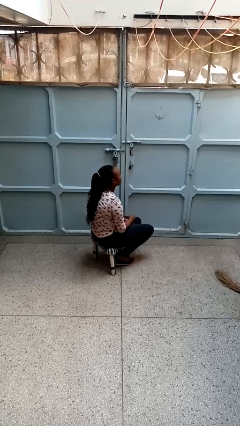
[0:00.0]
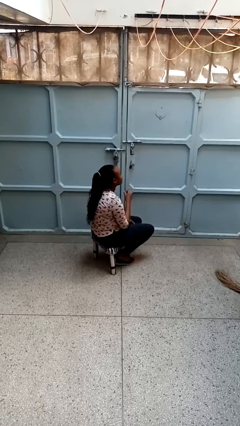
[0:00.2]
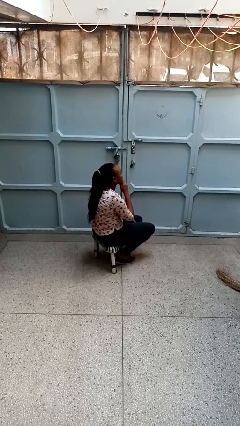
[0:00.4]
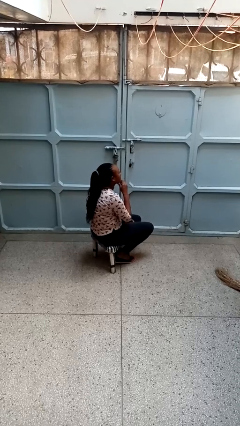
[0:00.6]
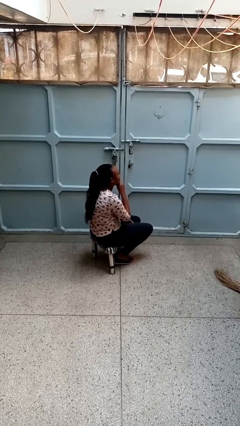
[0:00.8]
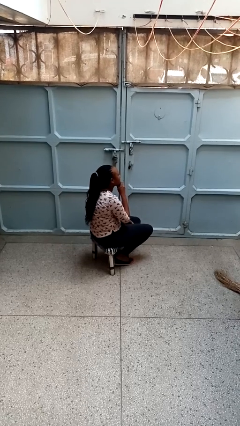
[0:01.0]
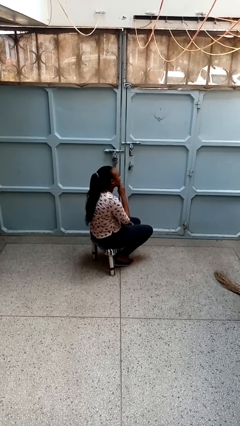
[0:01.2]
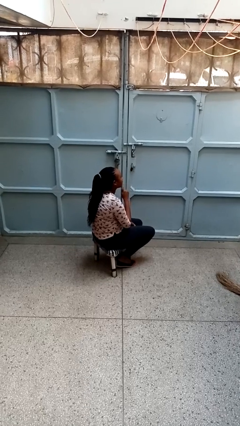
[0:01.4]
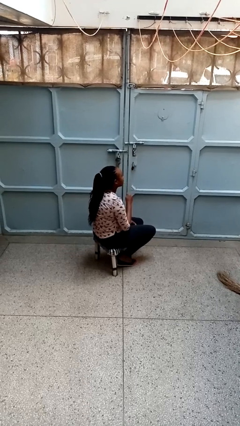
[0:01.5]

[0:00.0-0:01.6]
person strokes chin

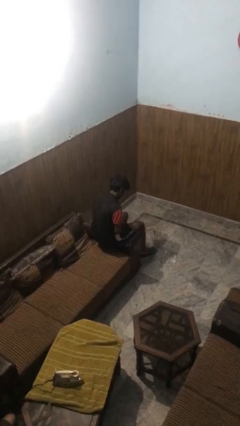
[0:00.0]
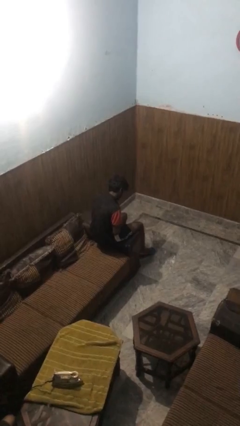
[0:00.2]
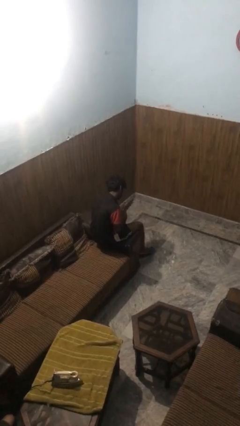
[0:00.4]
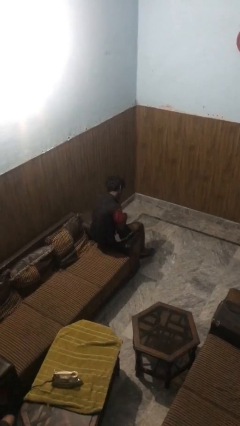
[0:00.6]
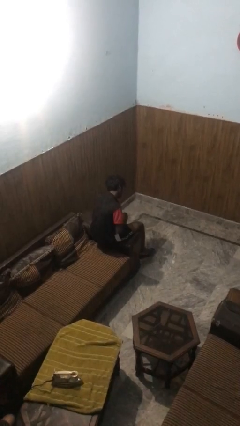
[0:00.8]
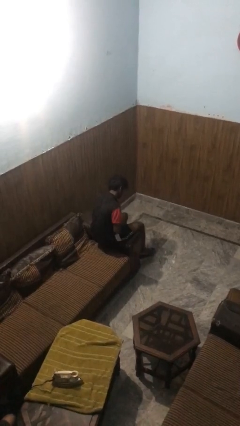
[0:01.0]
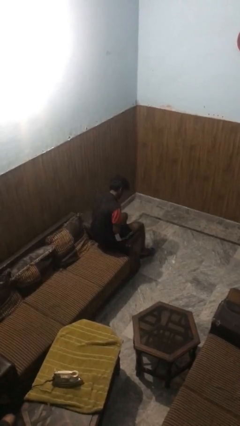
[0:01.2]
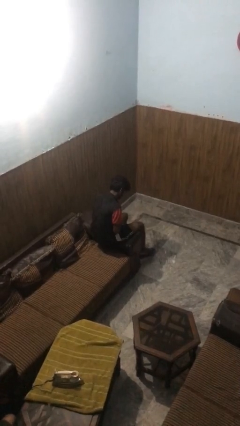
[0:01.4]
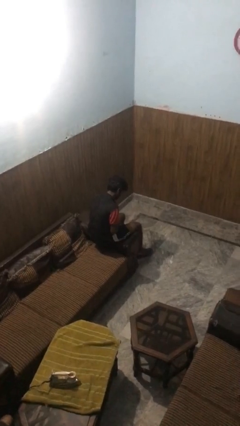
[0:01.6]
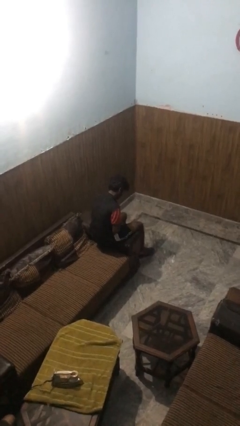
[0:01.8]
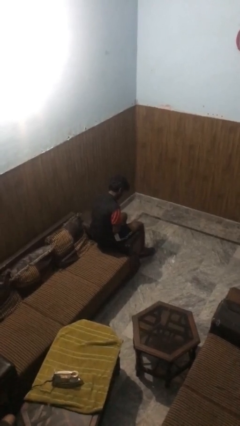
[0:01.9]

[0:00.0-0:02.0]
person swats bug

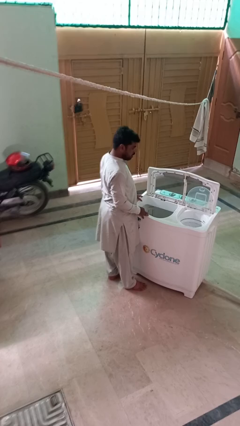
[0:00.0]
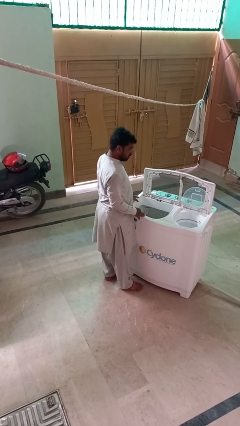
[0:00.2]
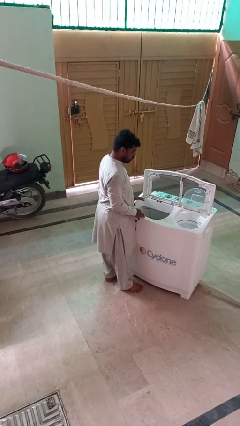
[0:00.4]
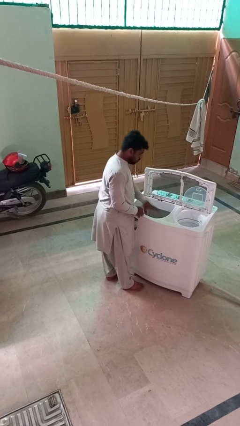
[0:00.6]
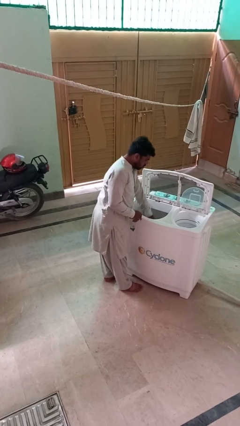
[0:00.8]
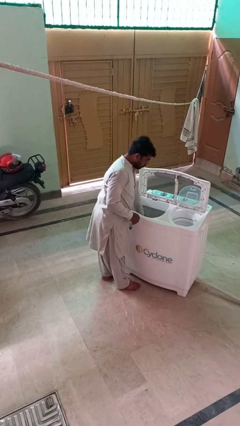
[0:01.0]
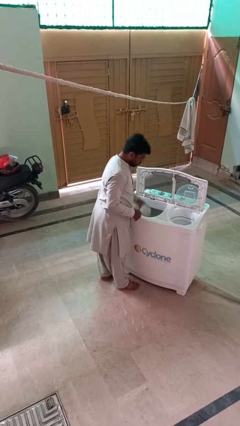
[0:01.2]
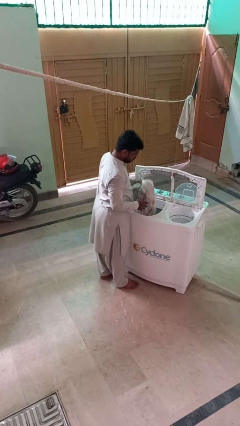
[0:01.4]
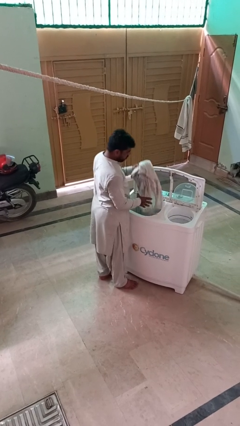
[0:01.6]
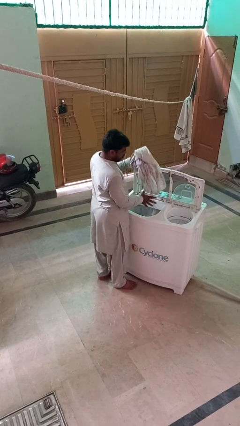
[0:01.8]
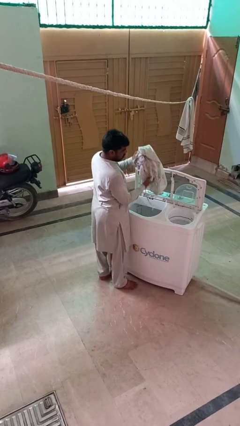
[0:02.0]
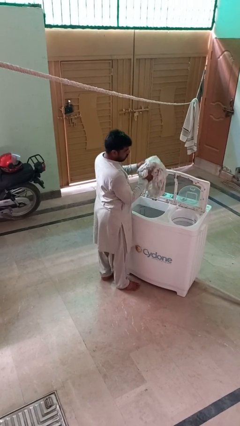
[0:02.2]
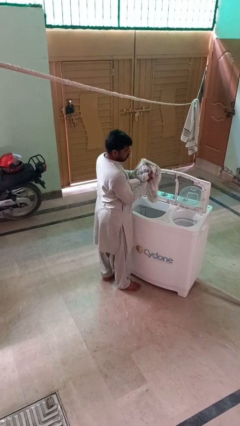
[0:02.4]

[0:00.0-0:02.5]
person unloads clotheswasher

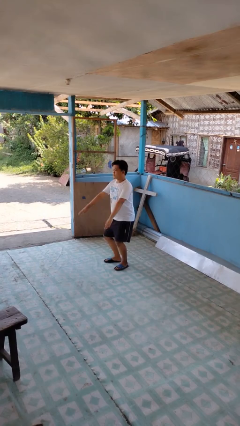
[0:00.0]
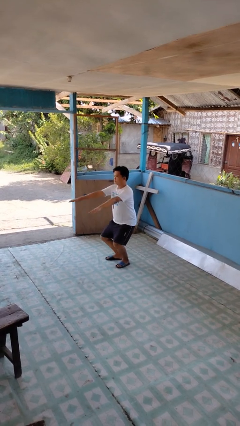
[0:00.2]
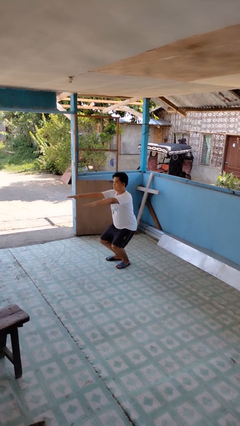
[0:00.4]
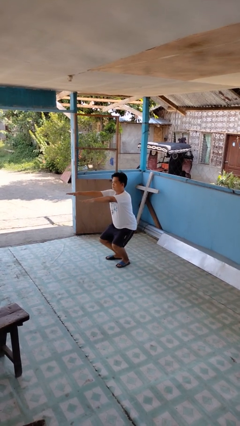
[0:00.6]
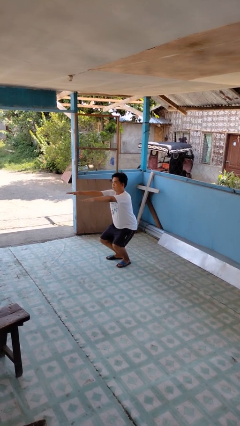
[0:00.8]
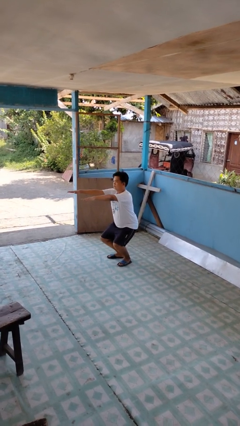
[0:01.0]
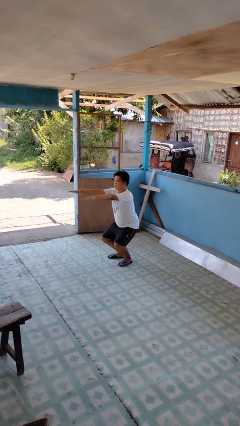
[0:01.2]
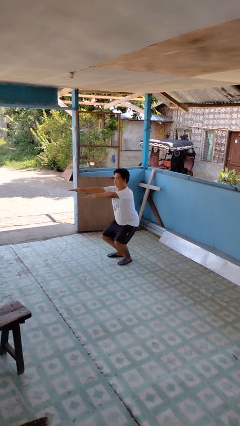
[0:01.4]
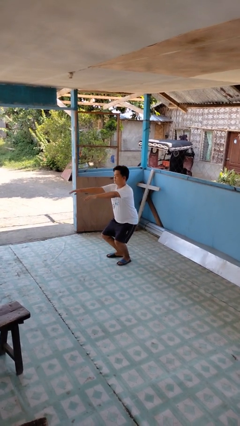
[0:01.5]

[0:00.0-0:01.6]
person squats

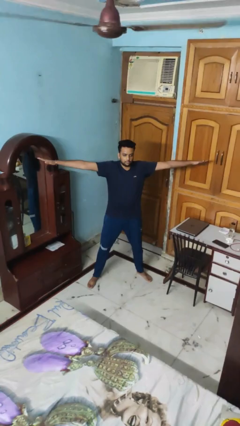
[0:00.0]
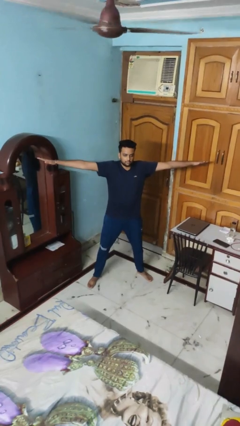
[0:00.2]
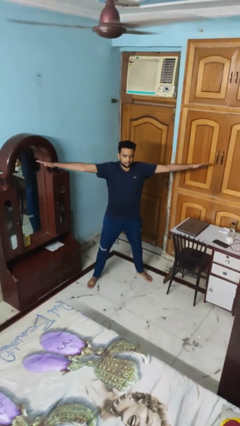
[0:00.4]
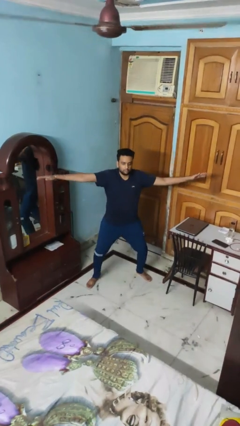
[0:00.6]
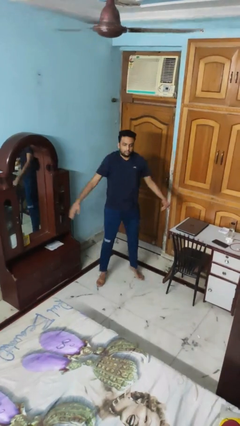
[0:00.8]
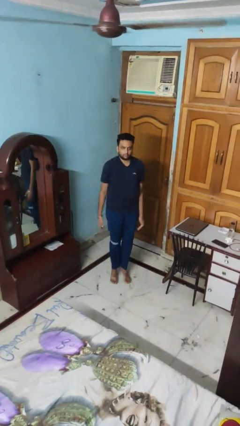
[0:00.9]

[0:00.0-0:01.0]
person exercises with jumping jacks

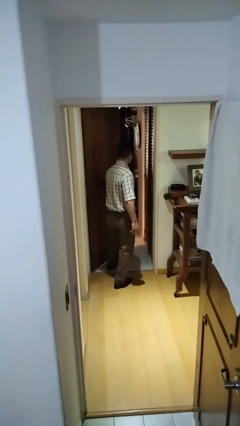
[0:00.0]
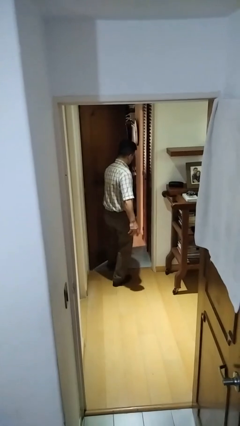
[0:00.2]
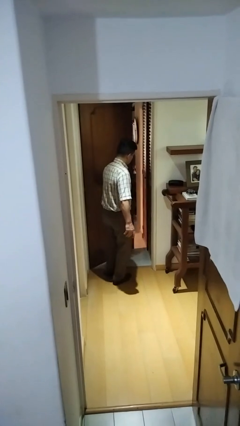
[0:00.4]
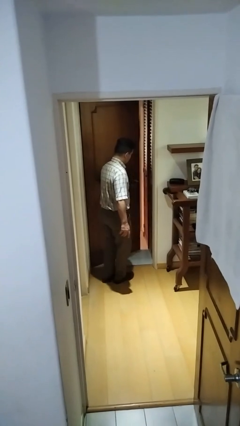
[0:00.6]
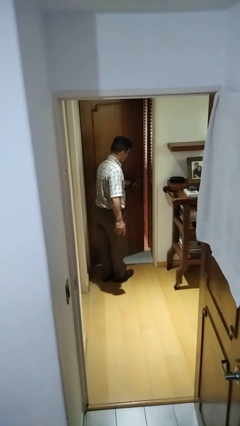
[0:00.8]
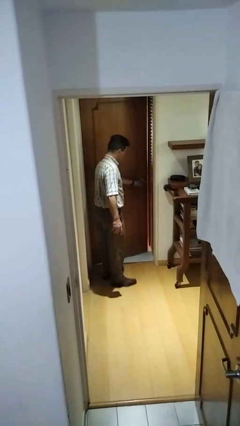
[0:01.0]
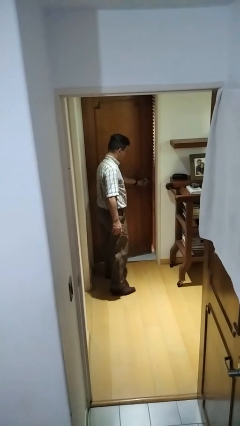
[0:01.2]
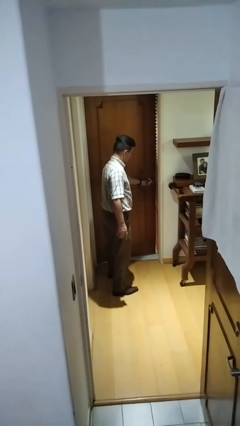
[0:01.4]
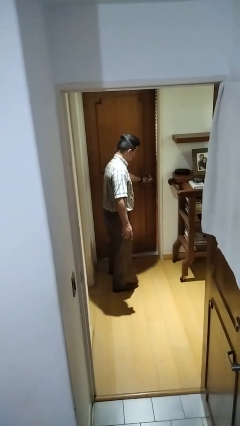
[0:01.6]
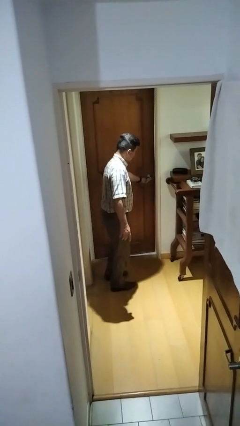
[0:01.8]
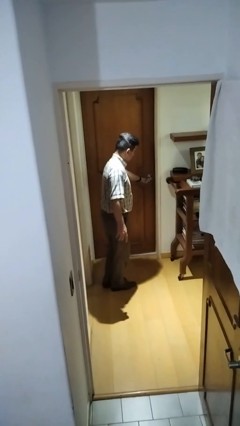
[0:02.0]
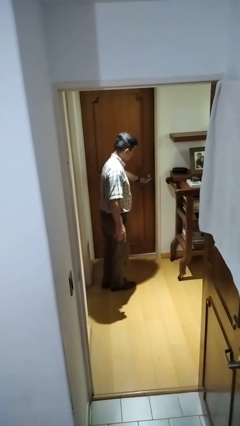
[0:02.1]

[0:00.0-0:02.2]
person closes facility door

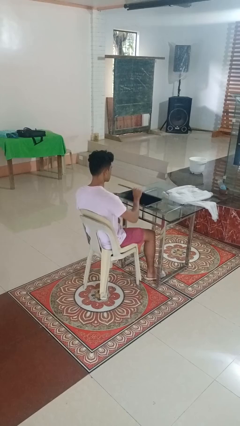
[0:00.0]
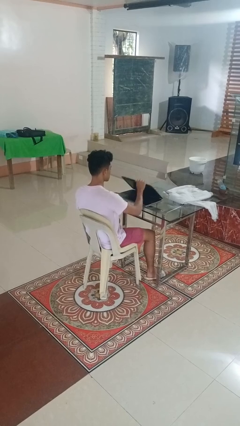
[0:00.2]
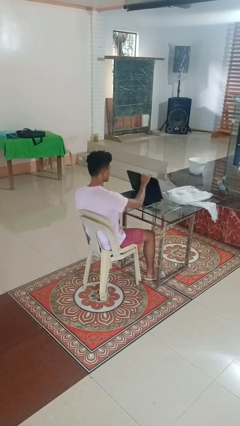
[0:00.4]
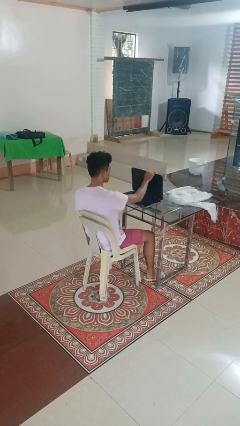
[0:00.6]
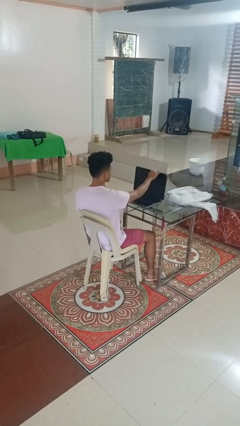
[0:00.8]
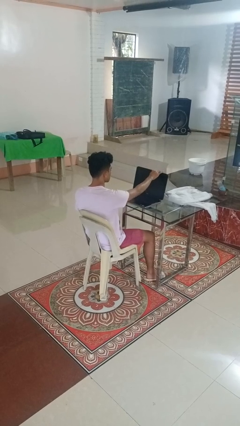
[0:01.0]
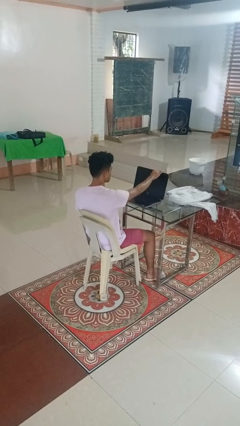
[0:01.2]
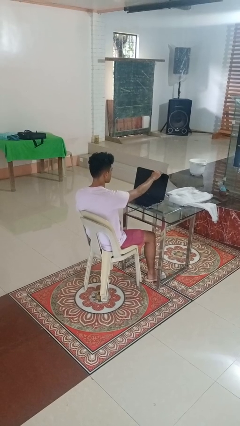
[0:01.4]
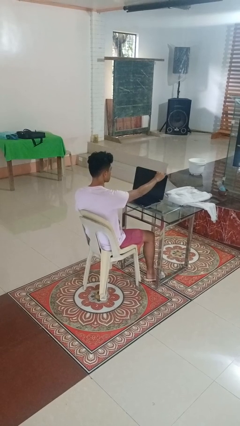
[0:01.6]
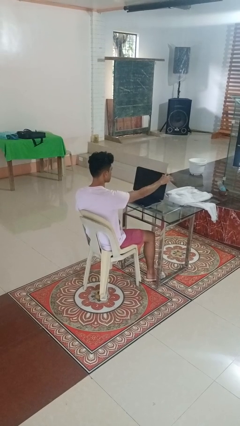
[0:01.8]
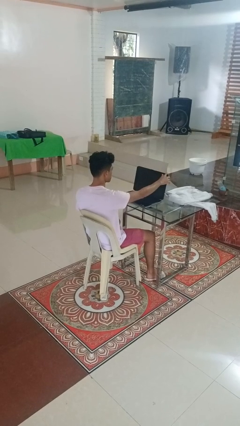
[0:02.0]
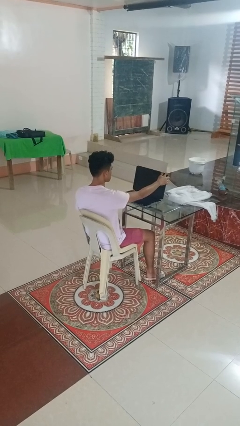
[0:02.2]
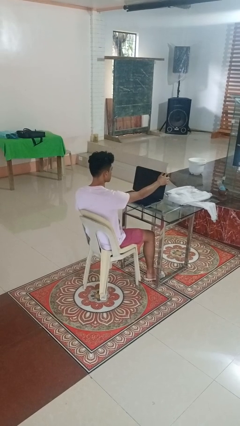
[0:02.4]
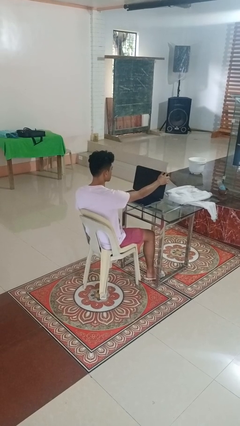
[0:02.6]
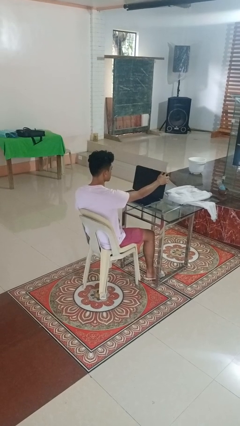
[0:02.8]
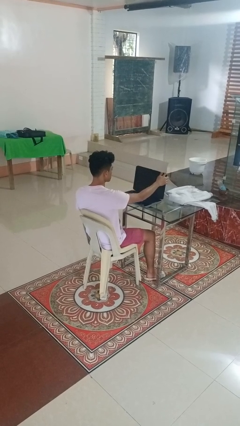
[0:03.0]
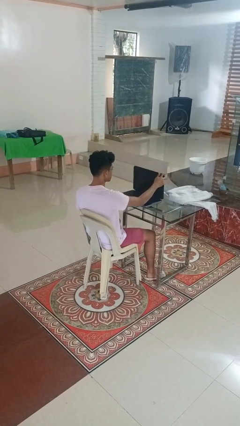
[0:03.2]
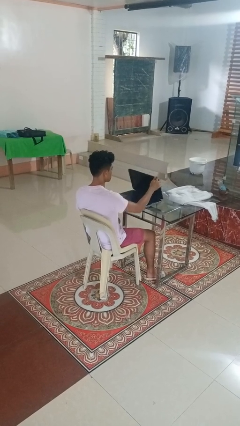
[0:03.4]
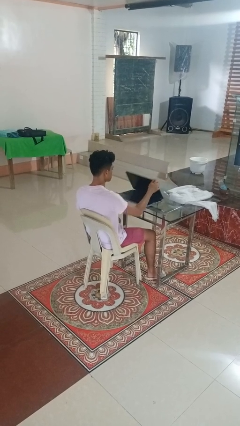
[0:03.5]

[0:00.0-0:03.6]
person opens laptop

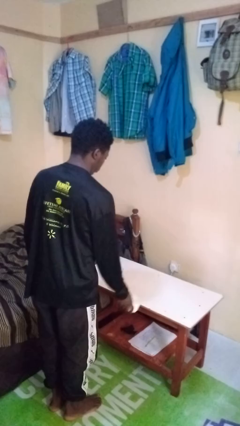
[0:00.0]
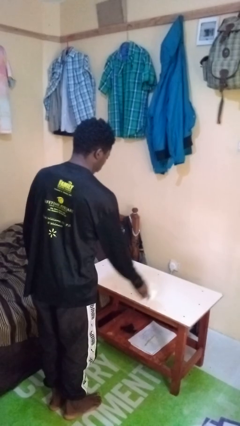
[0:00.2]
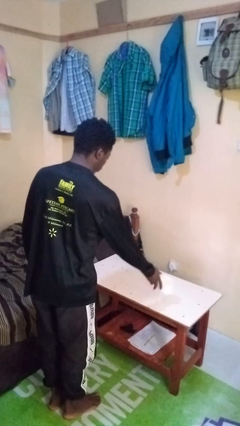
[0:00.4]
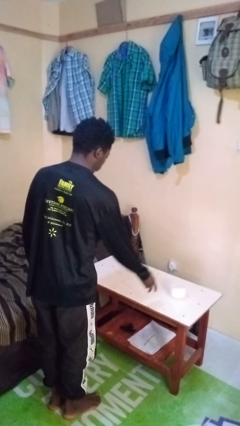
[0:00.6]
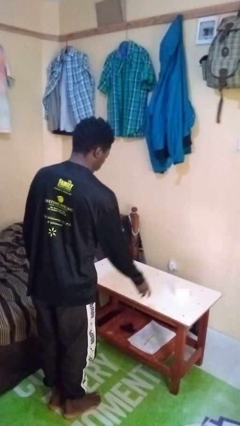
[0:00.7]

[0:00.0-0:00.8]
person throws object on table

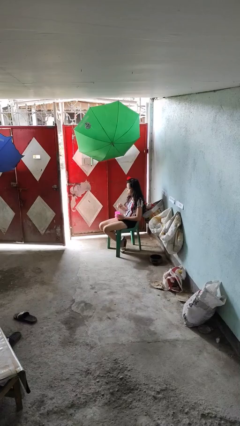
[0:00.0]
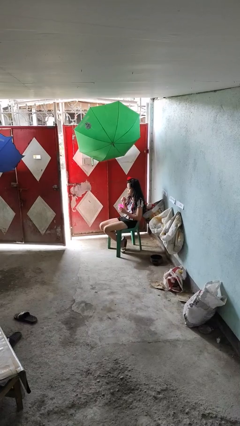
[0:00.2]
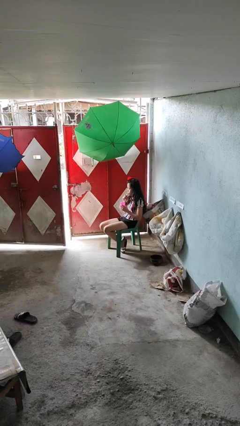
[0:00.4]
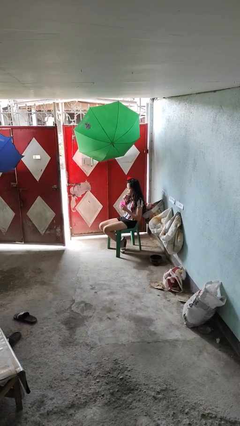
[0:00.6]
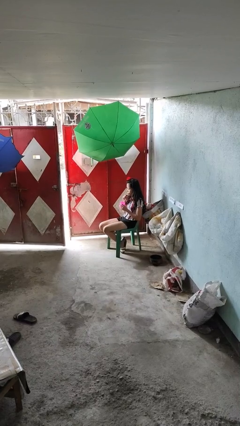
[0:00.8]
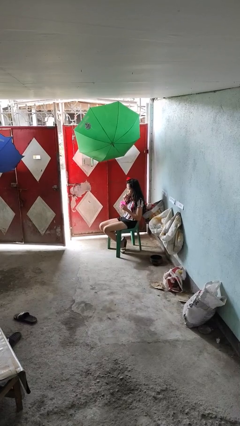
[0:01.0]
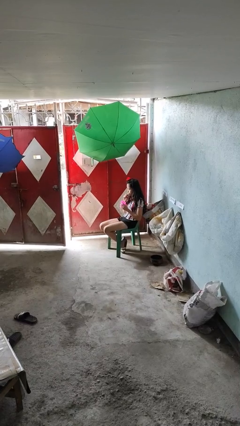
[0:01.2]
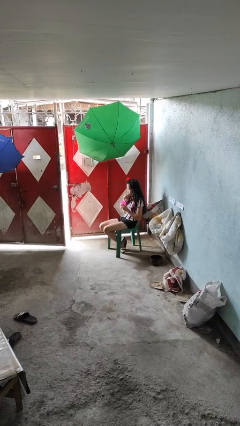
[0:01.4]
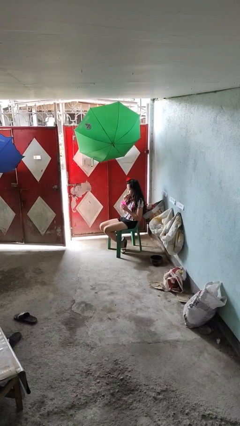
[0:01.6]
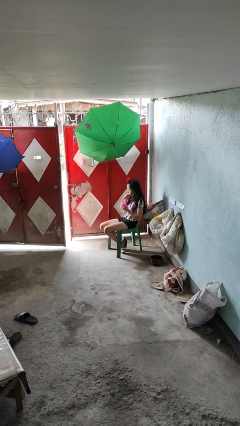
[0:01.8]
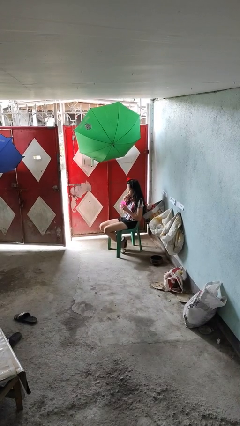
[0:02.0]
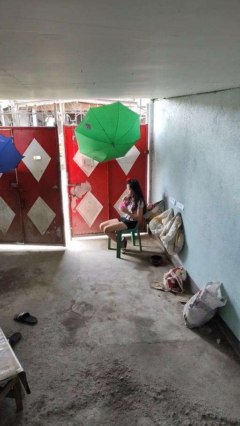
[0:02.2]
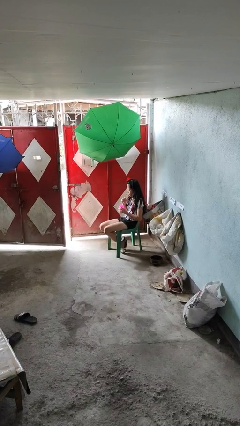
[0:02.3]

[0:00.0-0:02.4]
person drinks from straw
